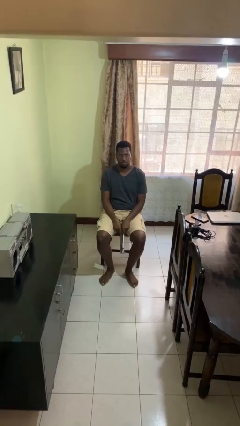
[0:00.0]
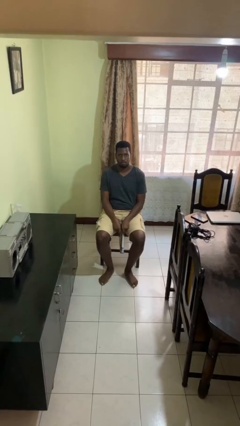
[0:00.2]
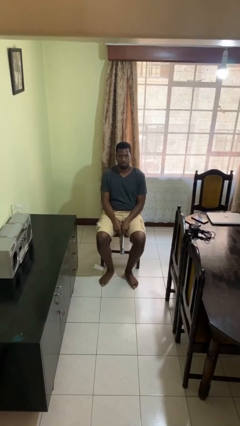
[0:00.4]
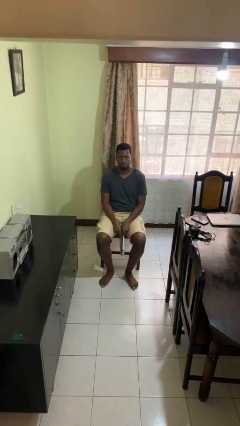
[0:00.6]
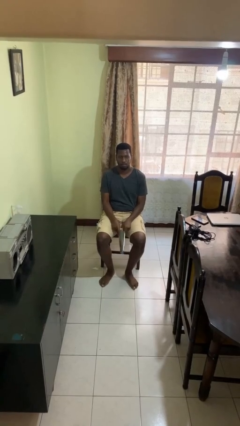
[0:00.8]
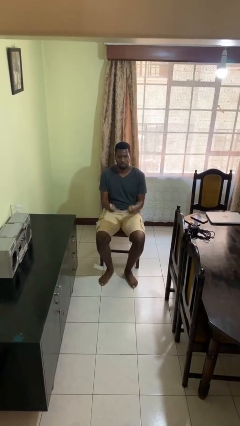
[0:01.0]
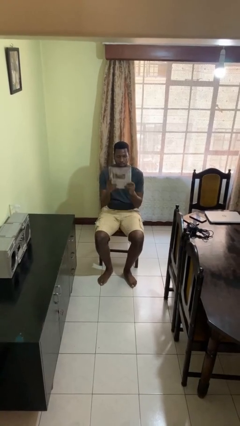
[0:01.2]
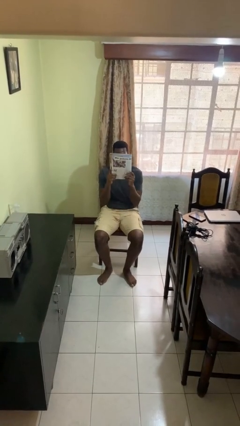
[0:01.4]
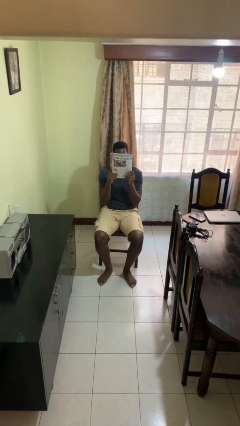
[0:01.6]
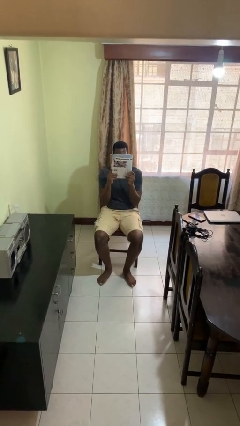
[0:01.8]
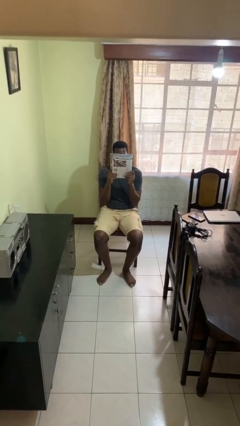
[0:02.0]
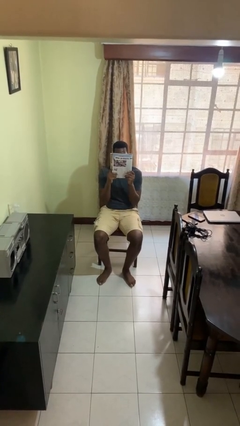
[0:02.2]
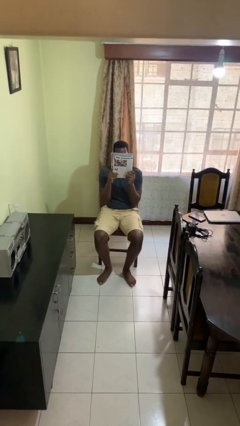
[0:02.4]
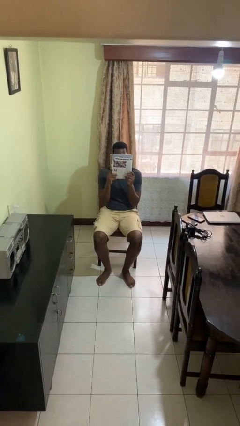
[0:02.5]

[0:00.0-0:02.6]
person reads document

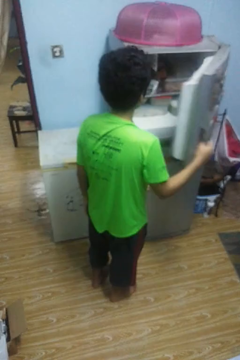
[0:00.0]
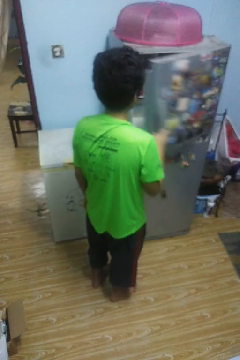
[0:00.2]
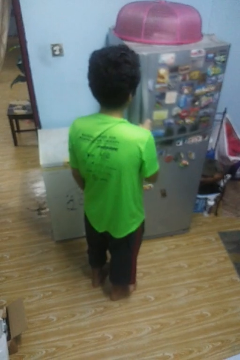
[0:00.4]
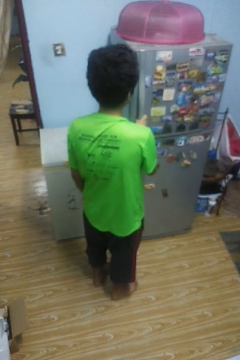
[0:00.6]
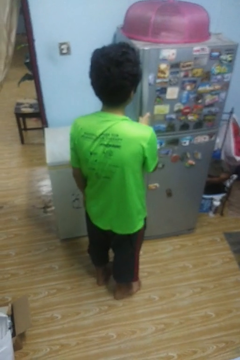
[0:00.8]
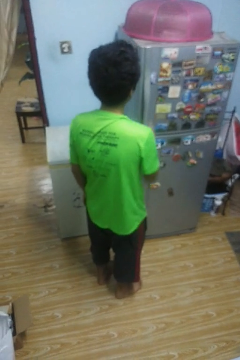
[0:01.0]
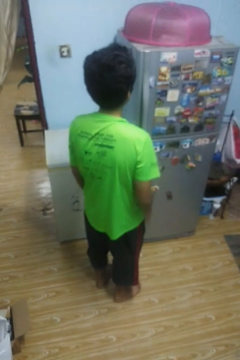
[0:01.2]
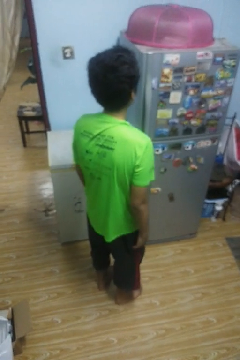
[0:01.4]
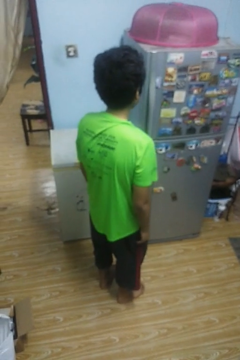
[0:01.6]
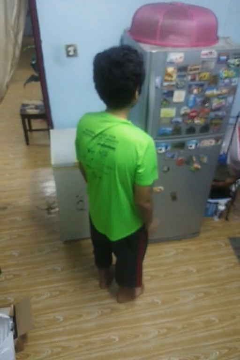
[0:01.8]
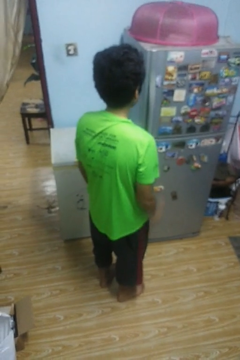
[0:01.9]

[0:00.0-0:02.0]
person closes refrigerator

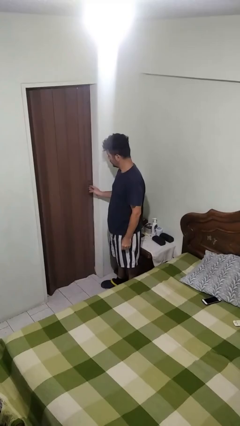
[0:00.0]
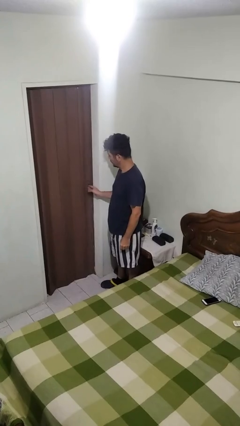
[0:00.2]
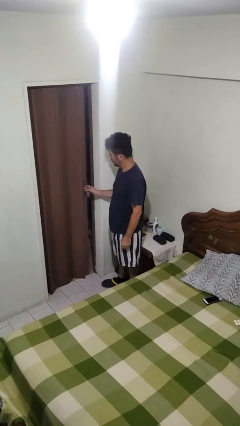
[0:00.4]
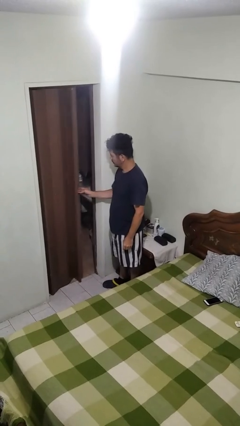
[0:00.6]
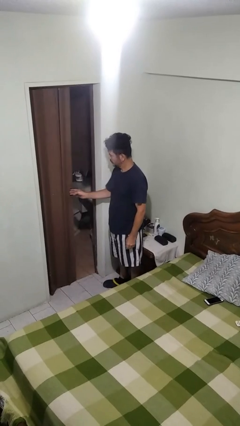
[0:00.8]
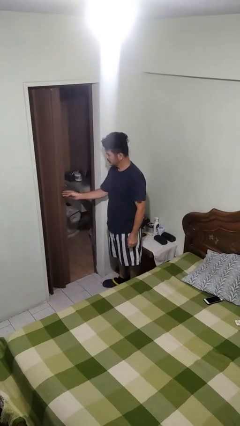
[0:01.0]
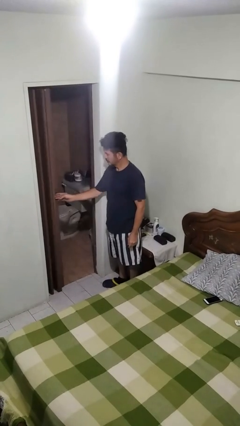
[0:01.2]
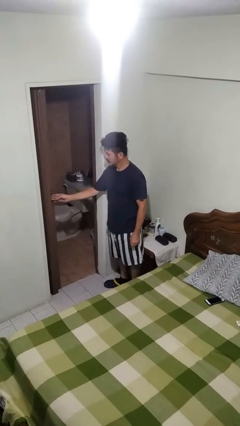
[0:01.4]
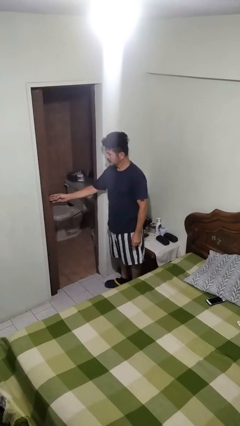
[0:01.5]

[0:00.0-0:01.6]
person opens sliding door

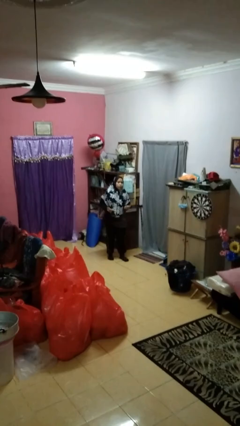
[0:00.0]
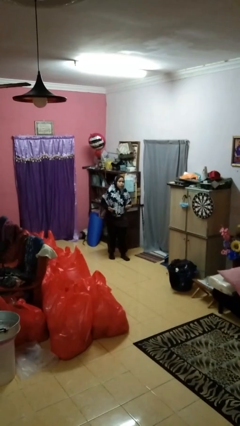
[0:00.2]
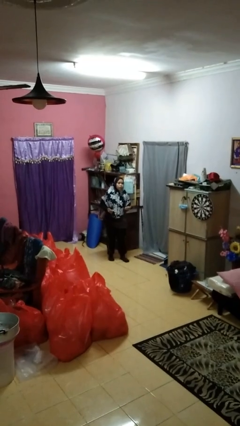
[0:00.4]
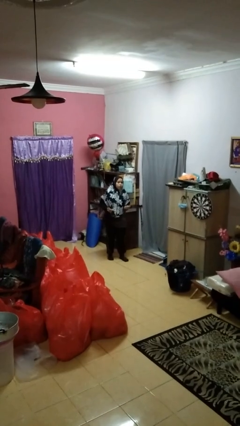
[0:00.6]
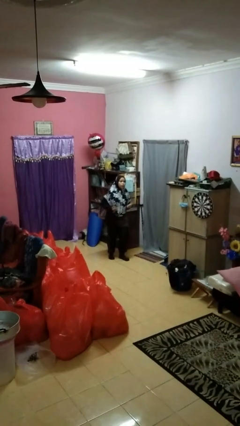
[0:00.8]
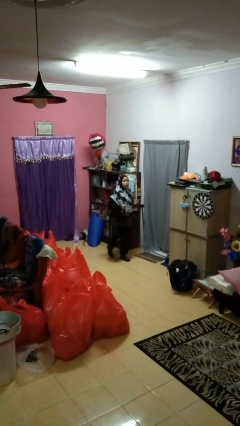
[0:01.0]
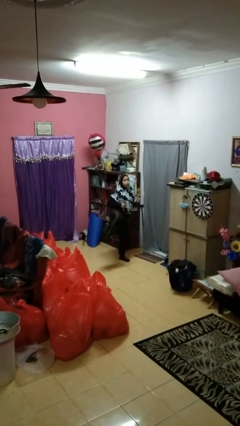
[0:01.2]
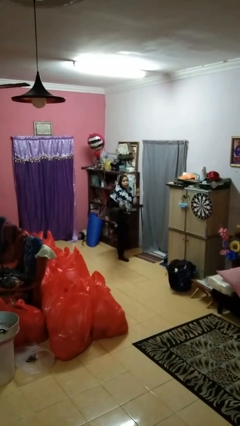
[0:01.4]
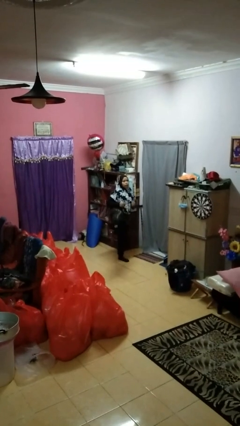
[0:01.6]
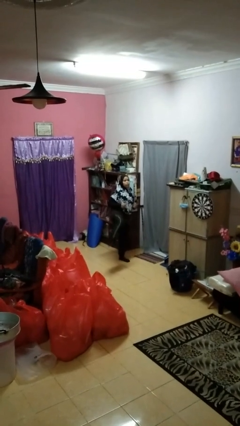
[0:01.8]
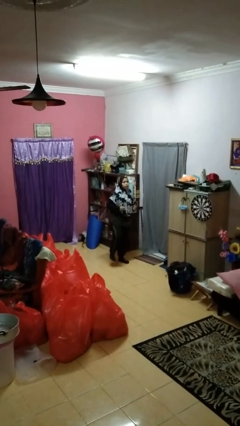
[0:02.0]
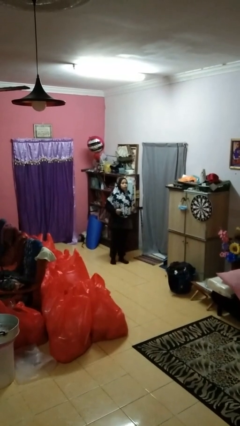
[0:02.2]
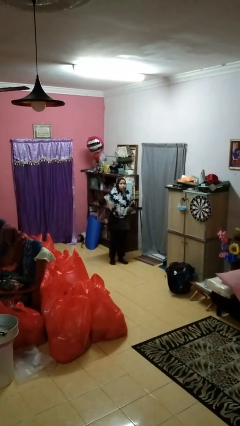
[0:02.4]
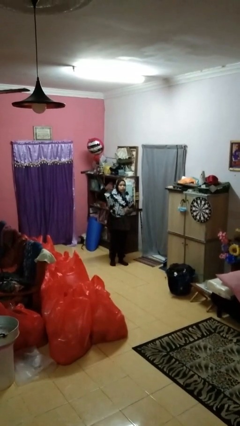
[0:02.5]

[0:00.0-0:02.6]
person karate kicks

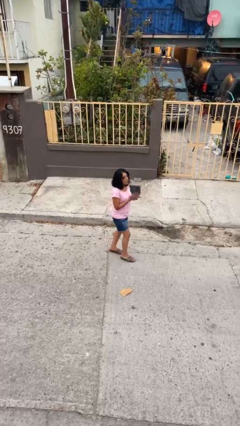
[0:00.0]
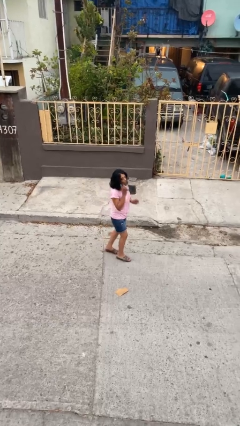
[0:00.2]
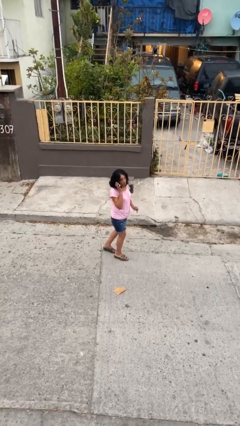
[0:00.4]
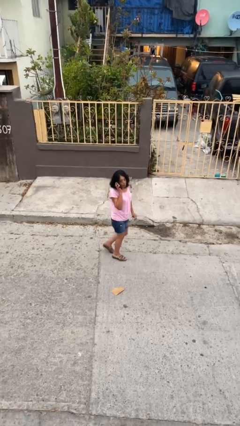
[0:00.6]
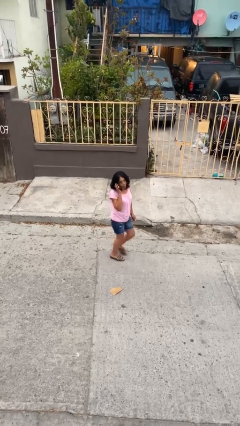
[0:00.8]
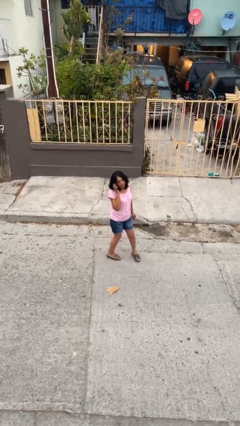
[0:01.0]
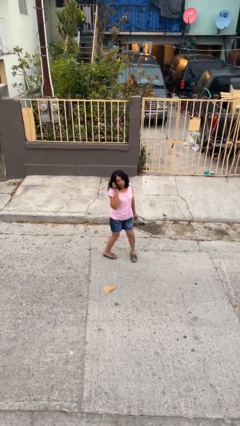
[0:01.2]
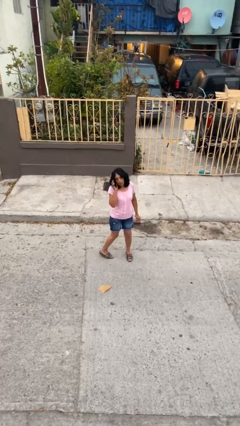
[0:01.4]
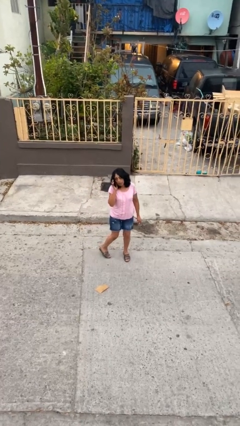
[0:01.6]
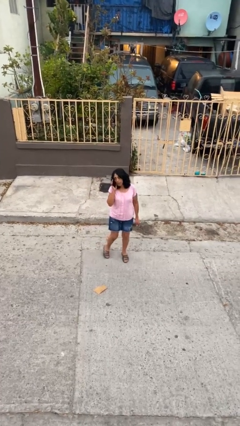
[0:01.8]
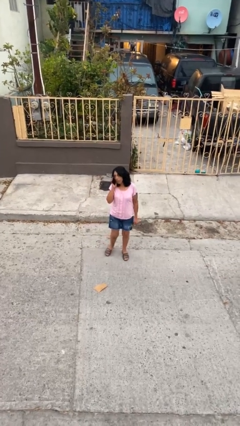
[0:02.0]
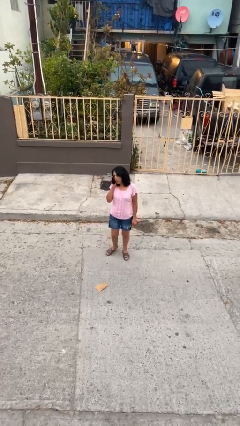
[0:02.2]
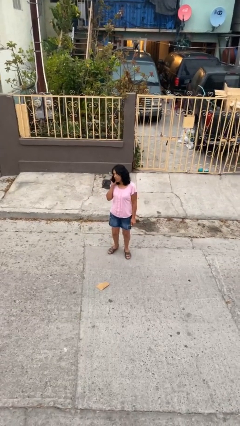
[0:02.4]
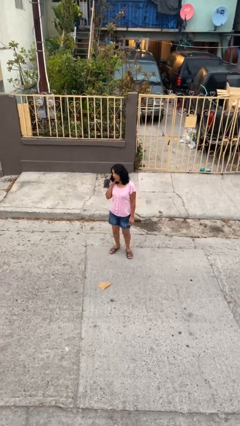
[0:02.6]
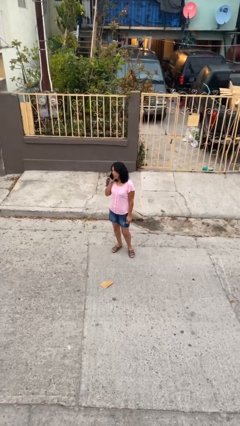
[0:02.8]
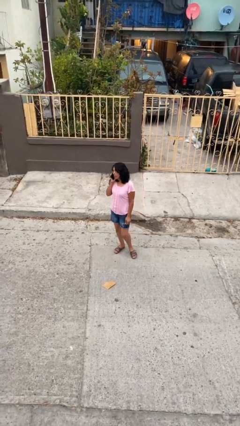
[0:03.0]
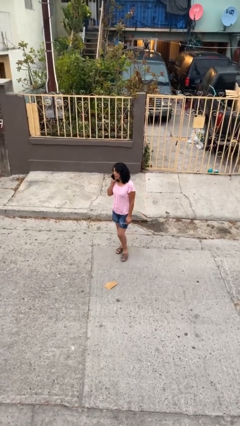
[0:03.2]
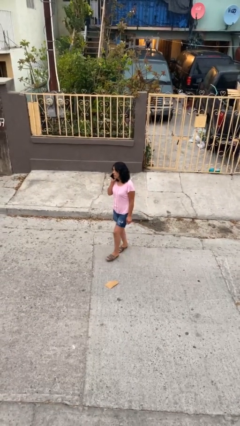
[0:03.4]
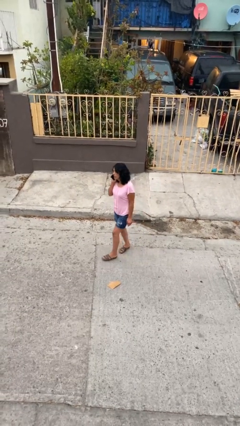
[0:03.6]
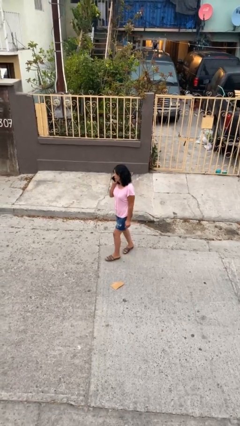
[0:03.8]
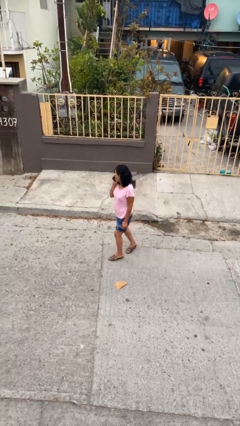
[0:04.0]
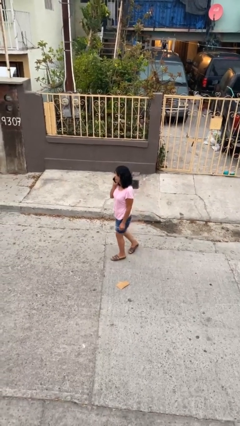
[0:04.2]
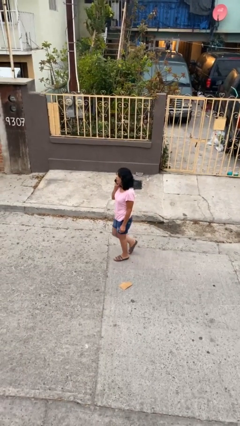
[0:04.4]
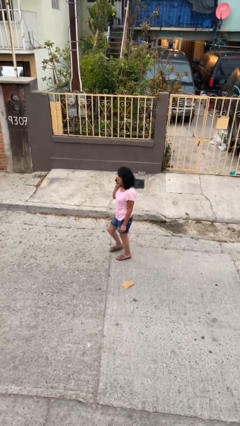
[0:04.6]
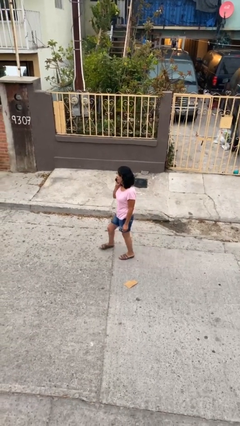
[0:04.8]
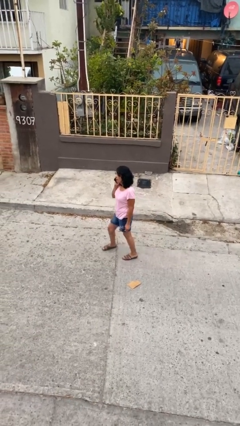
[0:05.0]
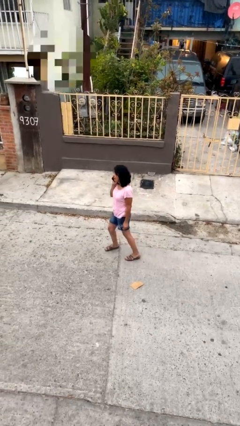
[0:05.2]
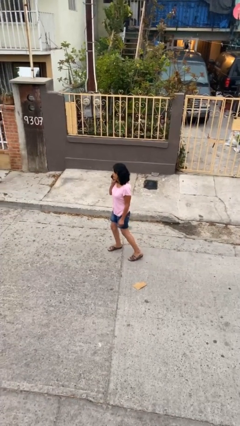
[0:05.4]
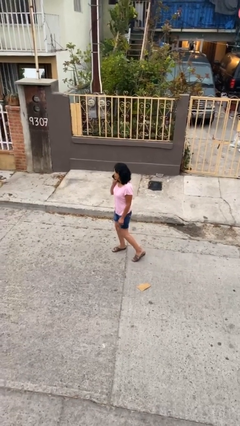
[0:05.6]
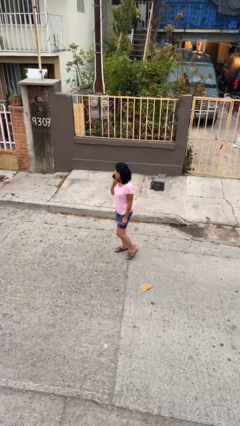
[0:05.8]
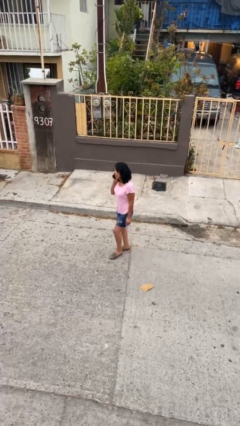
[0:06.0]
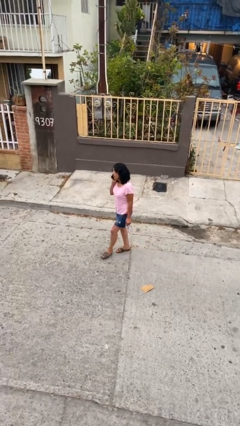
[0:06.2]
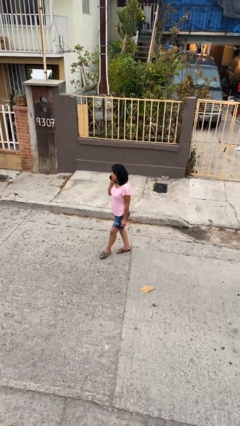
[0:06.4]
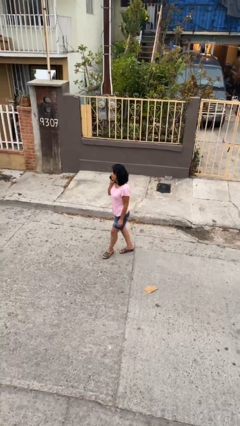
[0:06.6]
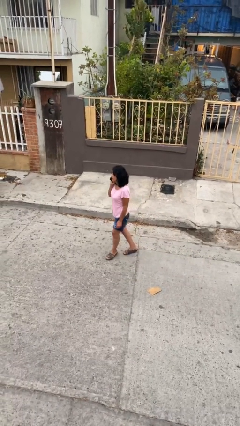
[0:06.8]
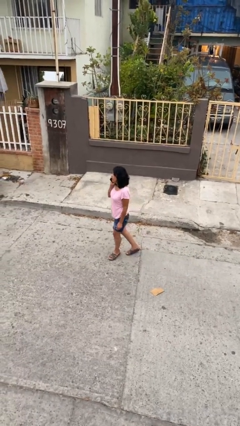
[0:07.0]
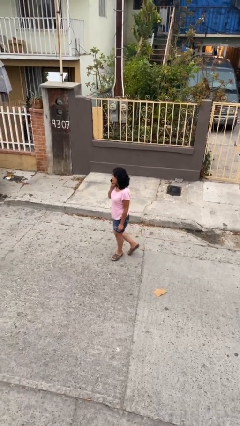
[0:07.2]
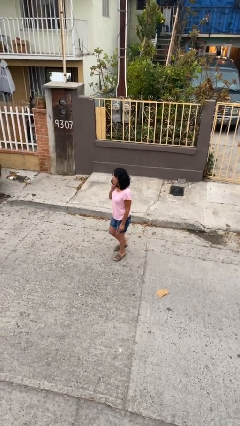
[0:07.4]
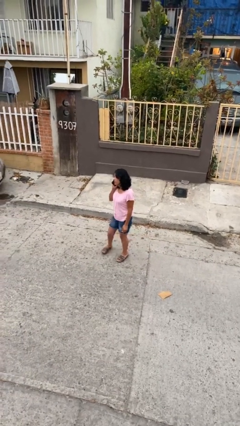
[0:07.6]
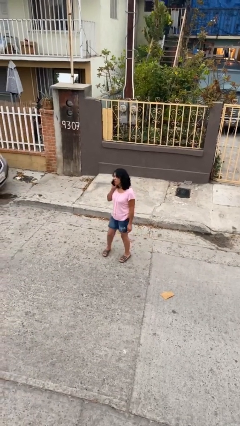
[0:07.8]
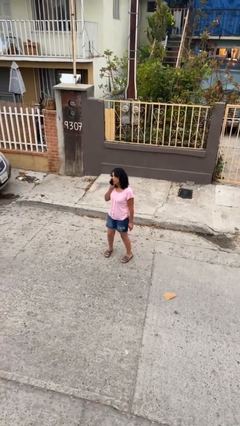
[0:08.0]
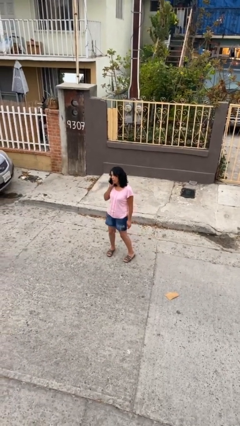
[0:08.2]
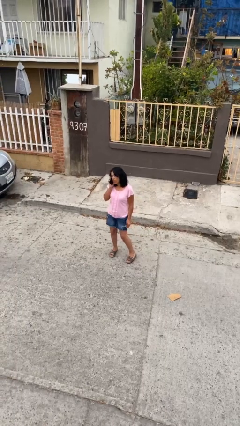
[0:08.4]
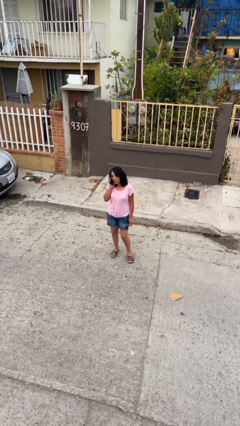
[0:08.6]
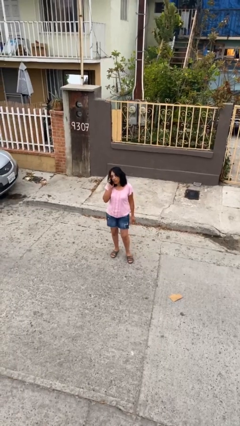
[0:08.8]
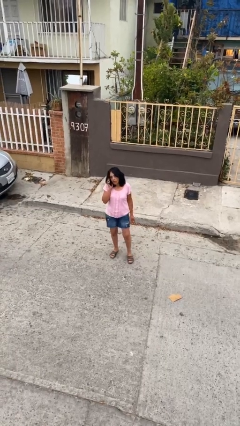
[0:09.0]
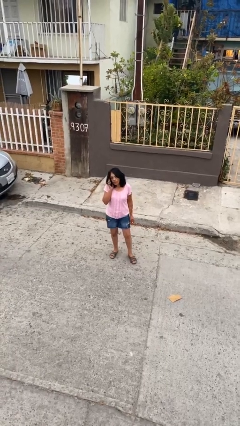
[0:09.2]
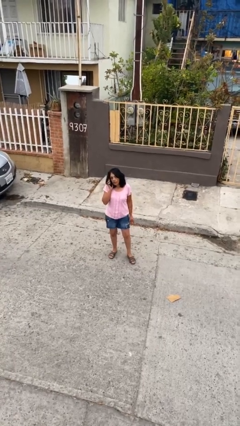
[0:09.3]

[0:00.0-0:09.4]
person talks on phone
